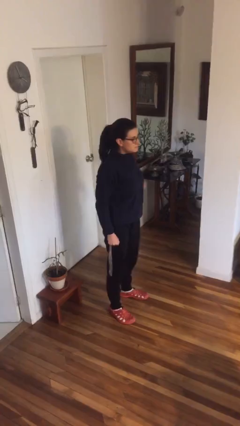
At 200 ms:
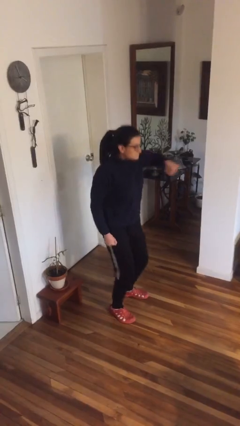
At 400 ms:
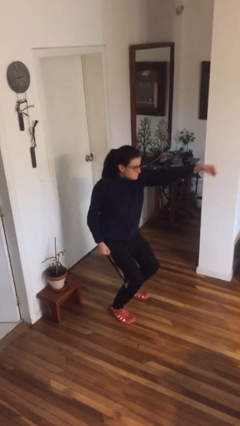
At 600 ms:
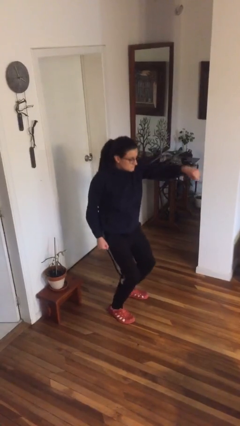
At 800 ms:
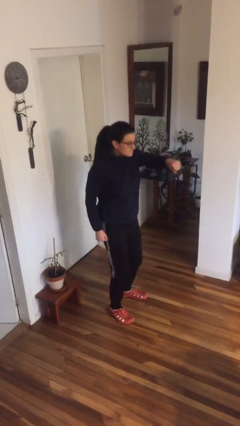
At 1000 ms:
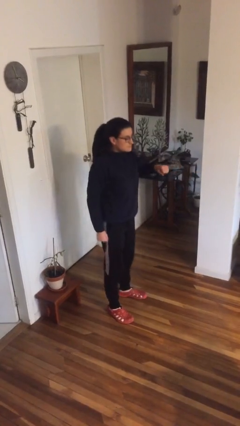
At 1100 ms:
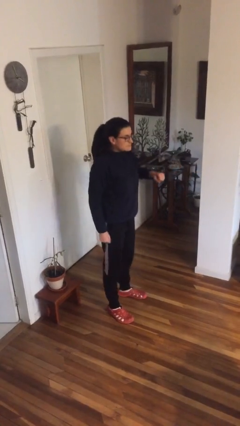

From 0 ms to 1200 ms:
person punches

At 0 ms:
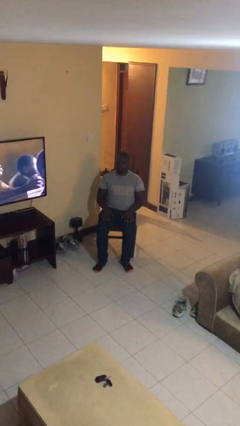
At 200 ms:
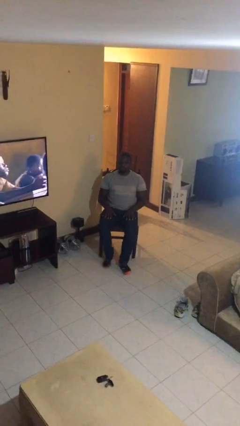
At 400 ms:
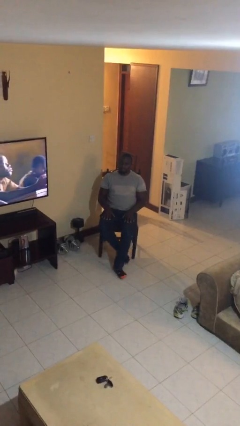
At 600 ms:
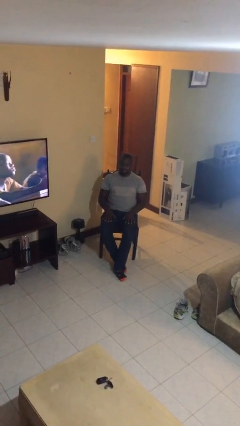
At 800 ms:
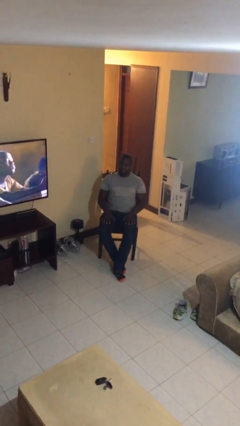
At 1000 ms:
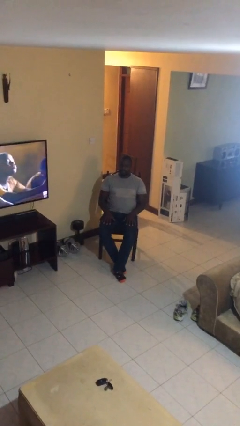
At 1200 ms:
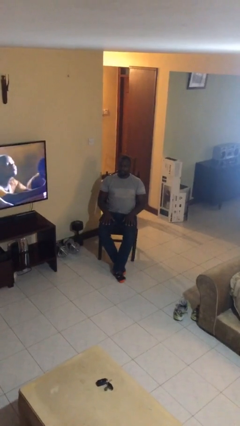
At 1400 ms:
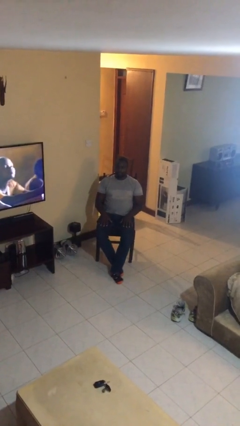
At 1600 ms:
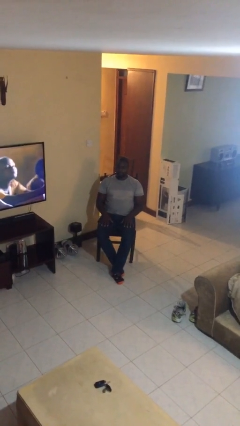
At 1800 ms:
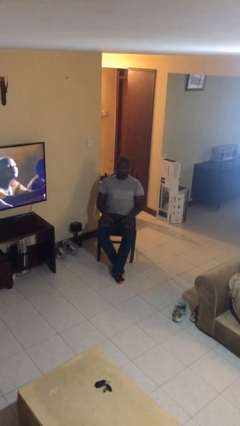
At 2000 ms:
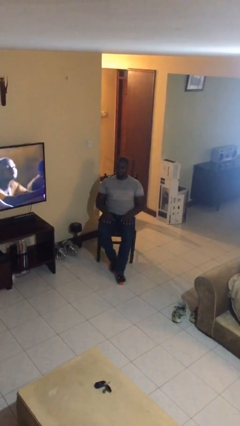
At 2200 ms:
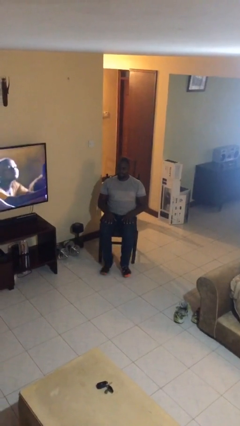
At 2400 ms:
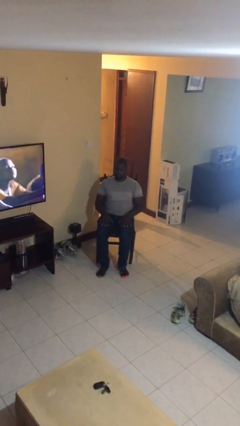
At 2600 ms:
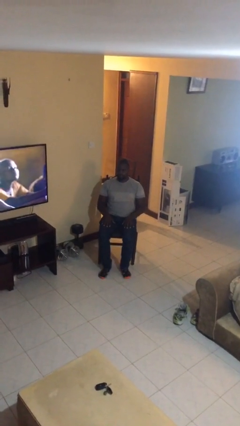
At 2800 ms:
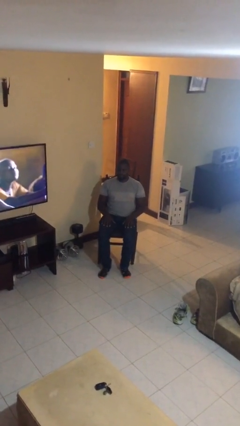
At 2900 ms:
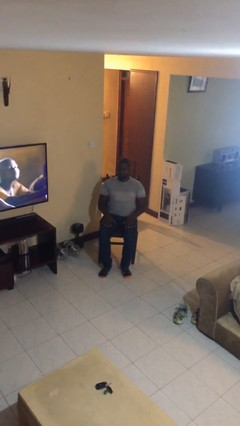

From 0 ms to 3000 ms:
person crosses legs

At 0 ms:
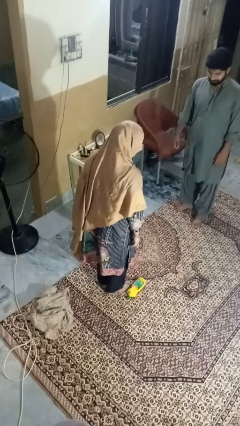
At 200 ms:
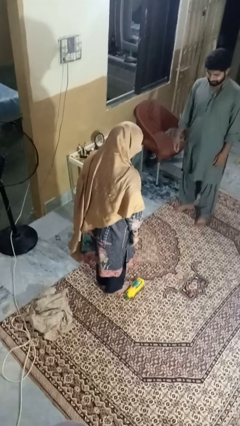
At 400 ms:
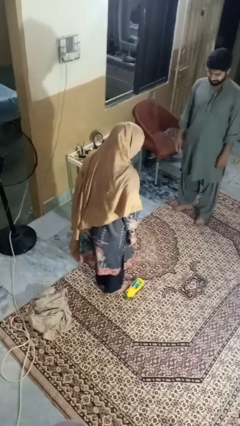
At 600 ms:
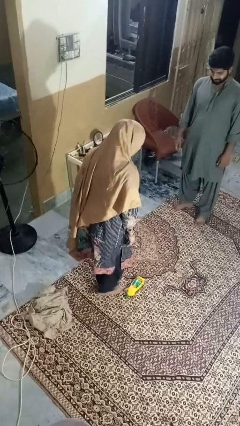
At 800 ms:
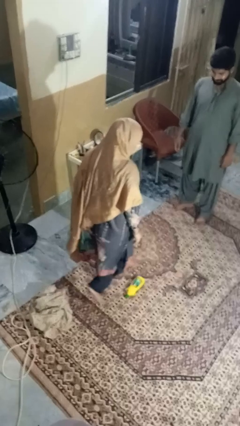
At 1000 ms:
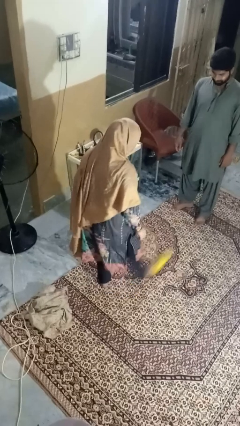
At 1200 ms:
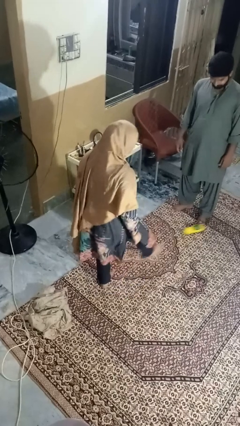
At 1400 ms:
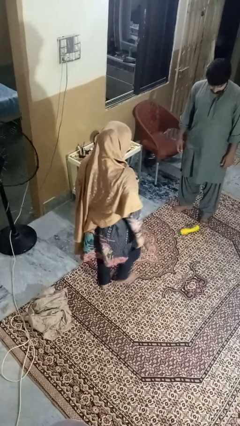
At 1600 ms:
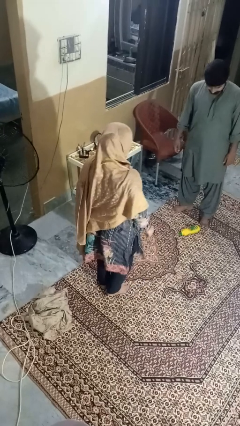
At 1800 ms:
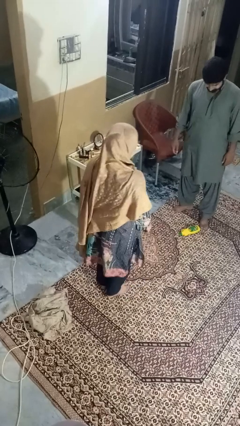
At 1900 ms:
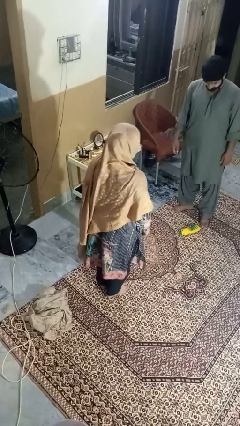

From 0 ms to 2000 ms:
person kicks object to person

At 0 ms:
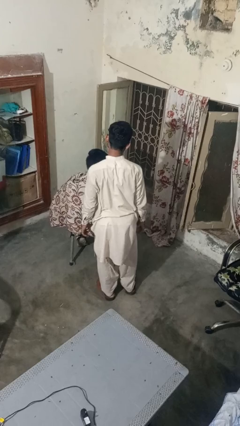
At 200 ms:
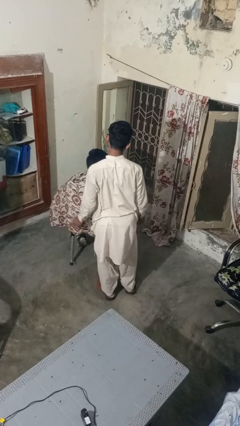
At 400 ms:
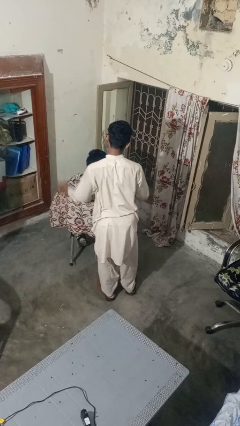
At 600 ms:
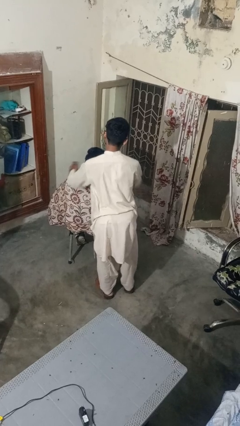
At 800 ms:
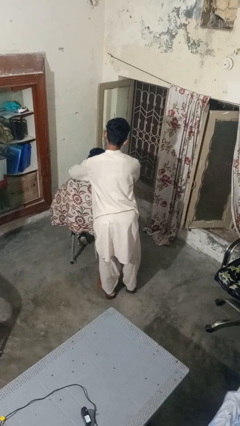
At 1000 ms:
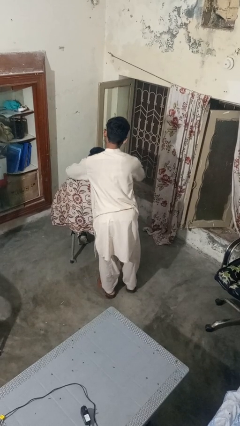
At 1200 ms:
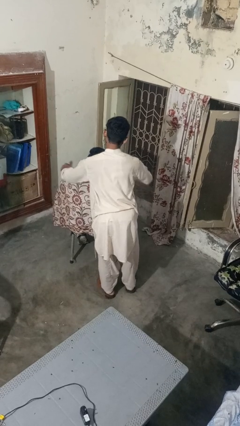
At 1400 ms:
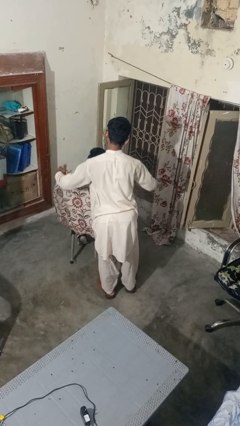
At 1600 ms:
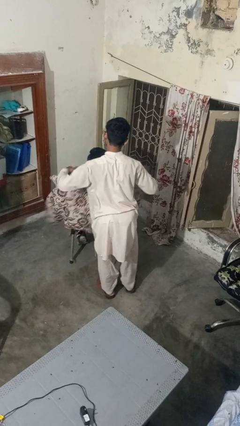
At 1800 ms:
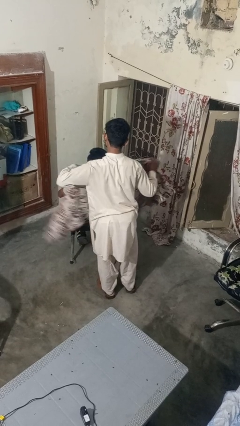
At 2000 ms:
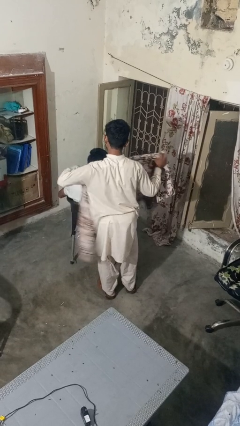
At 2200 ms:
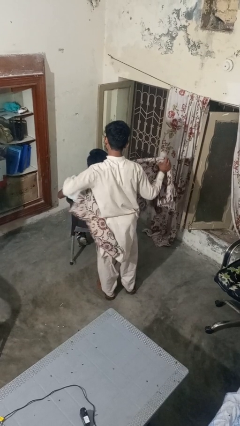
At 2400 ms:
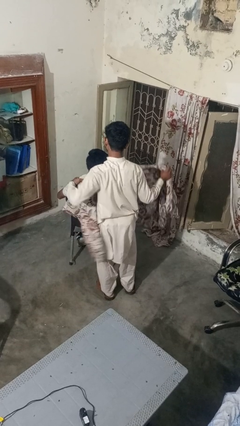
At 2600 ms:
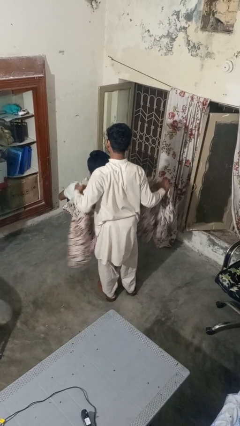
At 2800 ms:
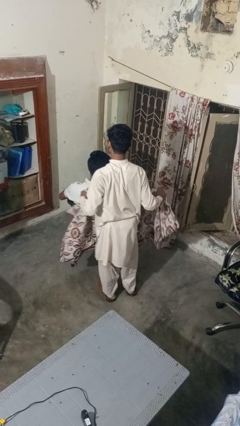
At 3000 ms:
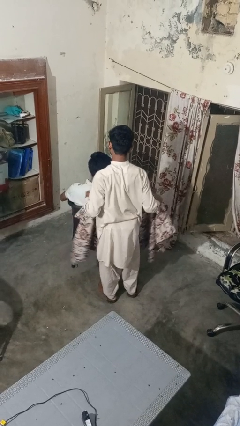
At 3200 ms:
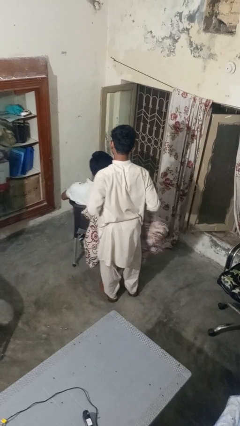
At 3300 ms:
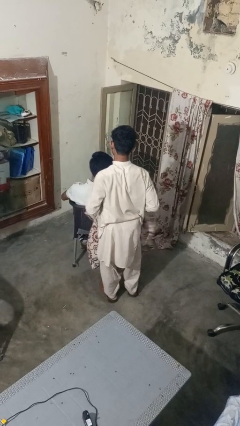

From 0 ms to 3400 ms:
person uncovers friend with blanket

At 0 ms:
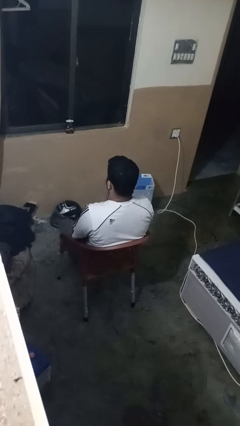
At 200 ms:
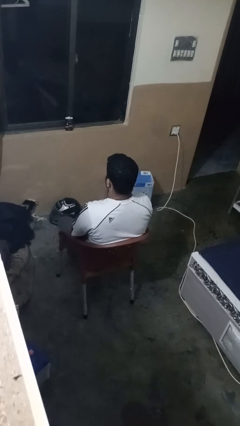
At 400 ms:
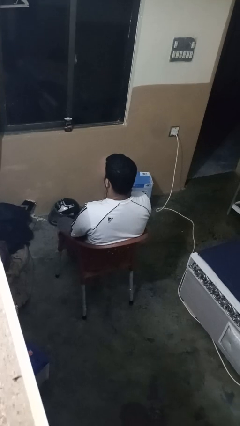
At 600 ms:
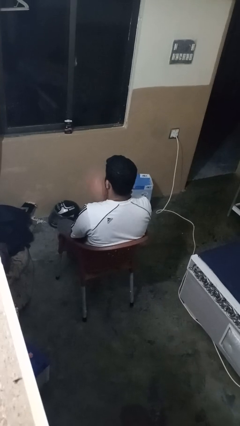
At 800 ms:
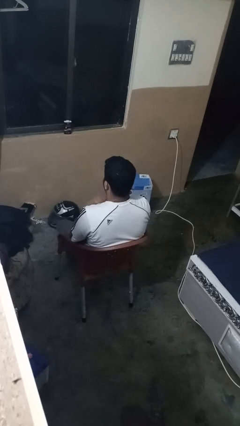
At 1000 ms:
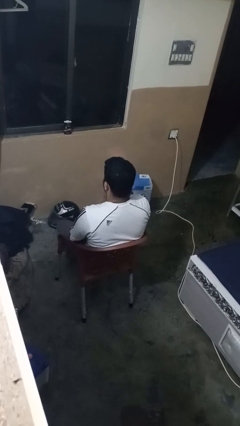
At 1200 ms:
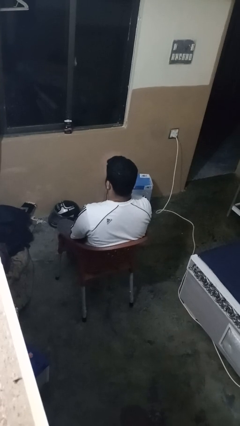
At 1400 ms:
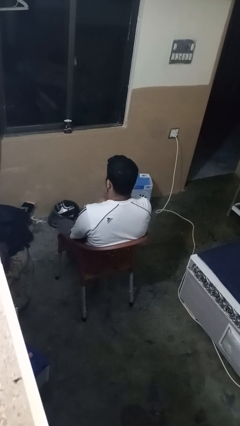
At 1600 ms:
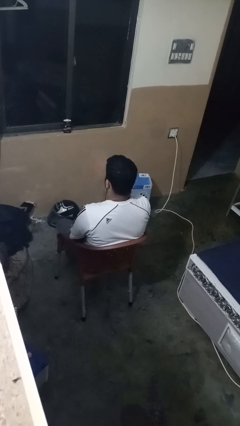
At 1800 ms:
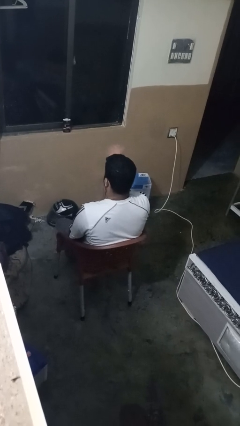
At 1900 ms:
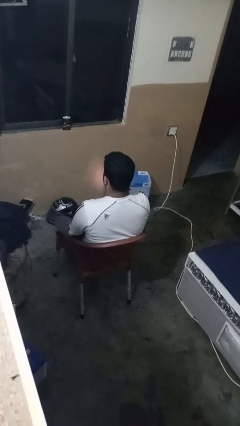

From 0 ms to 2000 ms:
person drums on chest

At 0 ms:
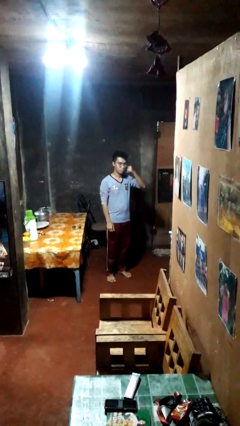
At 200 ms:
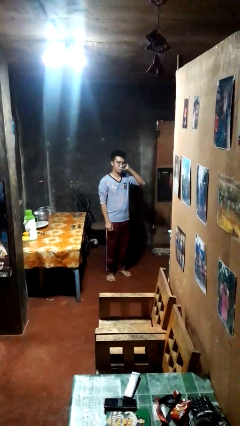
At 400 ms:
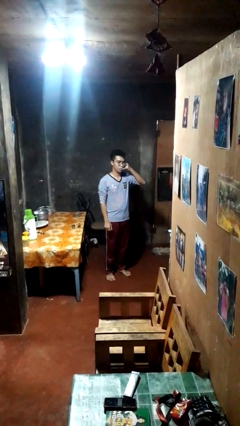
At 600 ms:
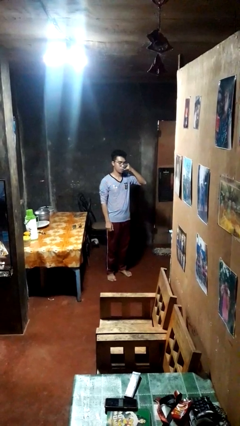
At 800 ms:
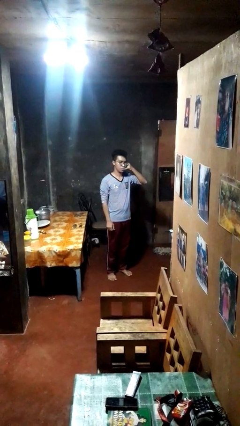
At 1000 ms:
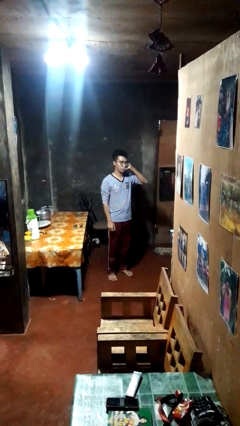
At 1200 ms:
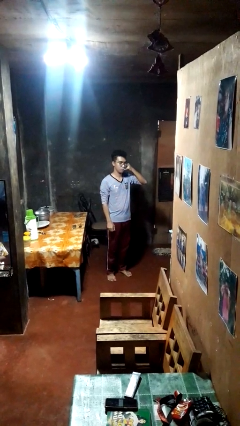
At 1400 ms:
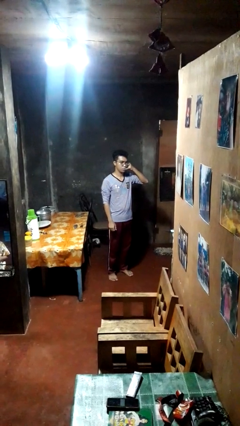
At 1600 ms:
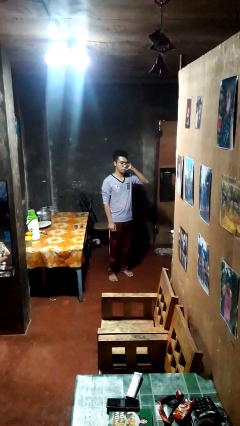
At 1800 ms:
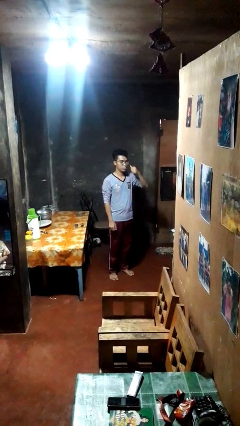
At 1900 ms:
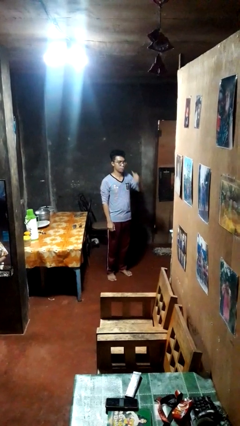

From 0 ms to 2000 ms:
person gestures call me

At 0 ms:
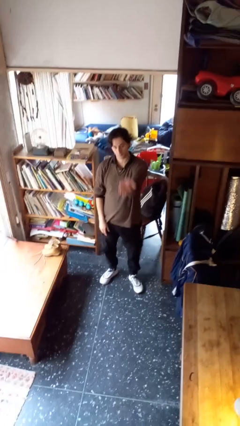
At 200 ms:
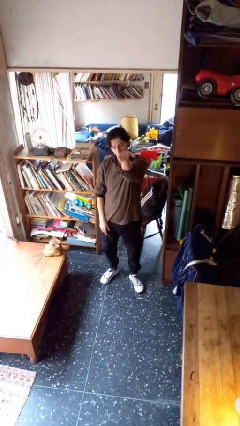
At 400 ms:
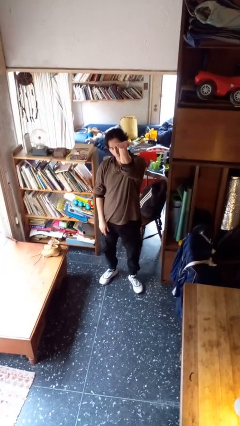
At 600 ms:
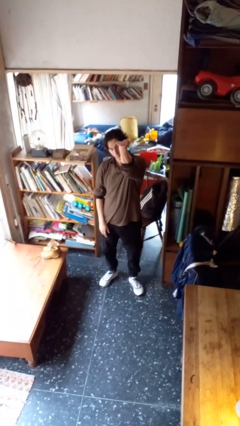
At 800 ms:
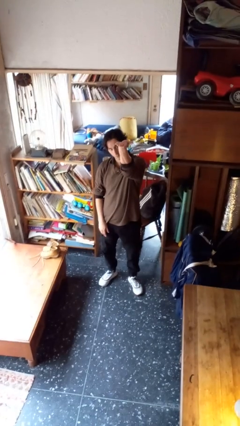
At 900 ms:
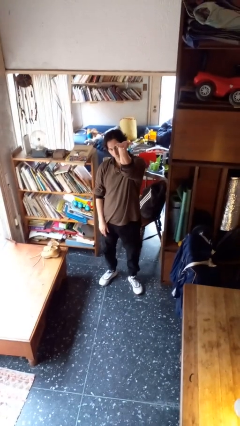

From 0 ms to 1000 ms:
person gestures swipe up

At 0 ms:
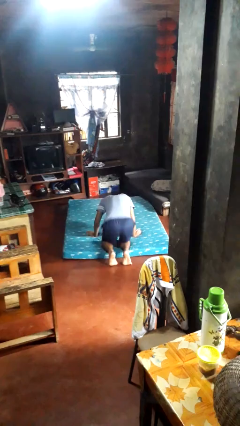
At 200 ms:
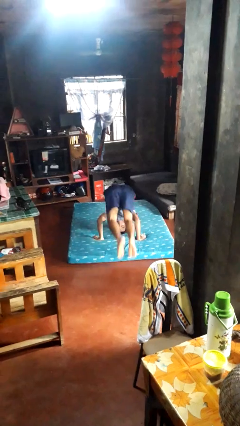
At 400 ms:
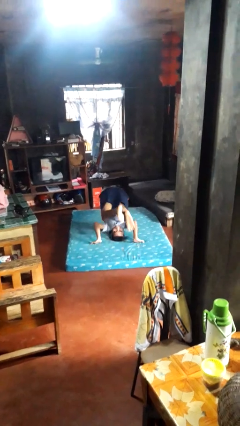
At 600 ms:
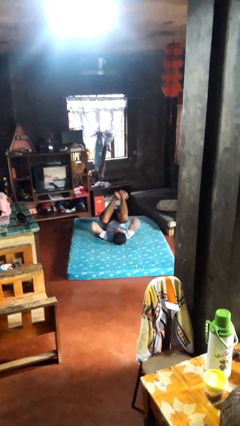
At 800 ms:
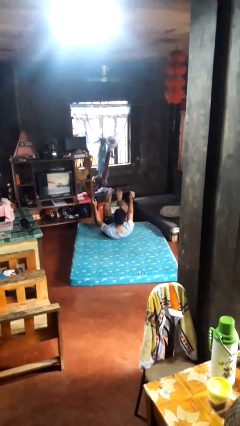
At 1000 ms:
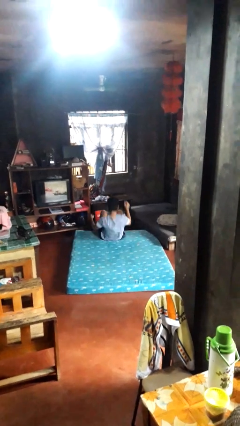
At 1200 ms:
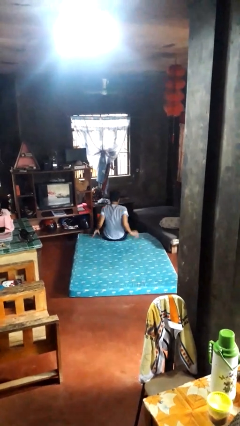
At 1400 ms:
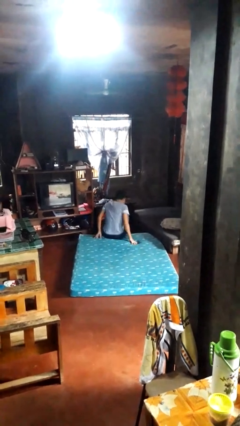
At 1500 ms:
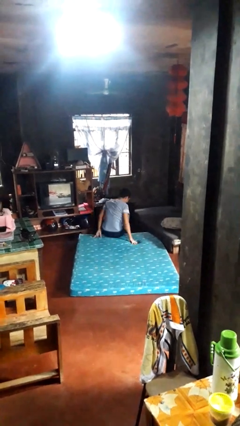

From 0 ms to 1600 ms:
person somersaults

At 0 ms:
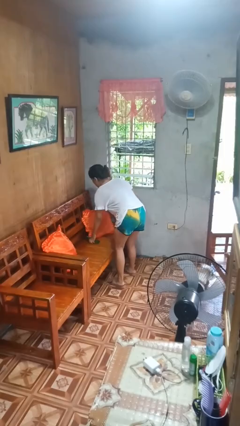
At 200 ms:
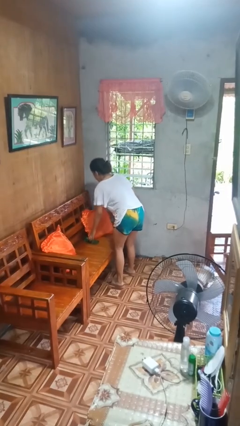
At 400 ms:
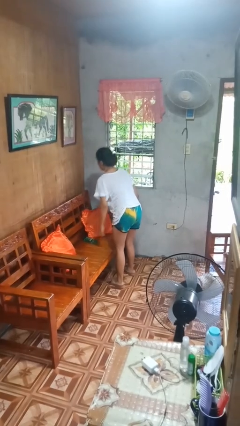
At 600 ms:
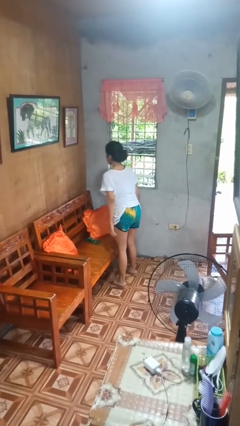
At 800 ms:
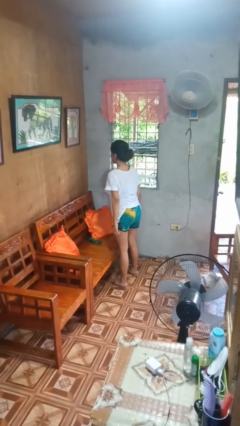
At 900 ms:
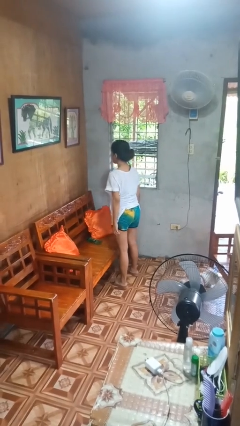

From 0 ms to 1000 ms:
person puts down object on couch
